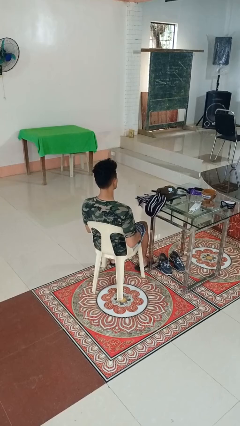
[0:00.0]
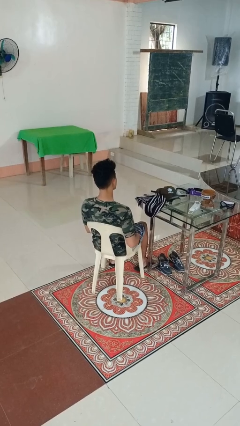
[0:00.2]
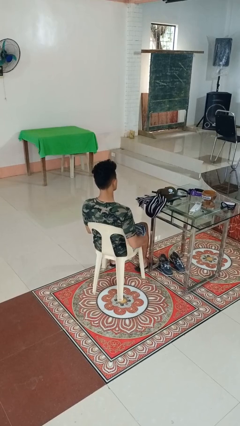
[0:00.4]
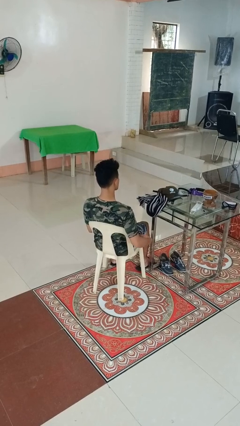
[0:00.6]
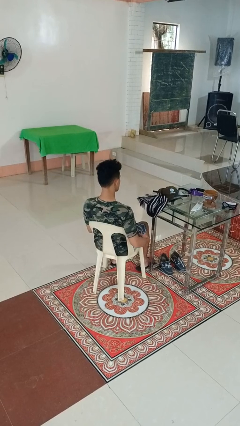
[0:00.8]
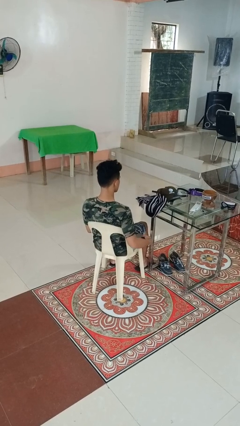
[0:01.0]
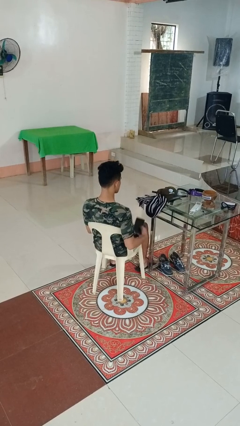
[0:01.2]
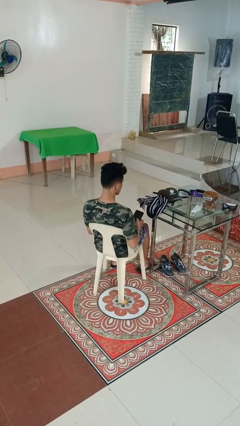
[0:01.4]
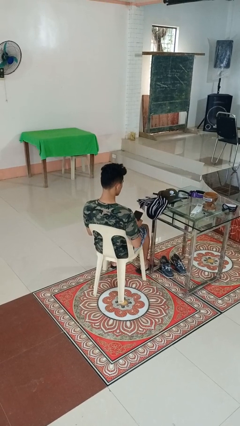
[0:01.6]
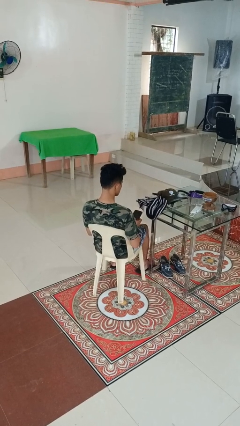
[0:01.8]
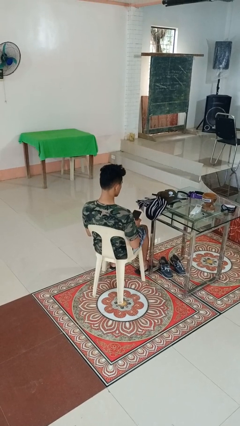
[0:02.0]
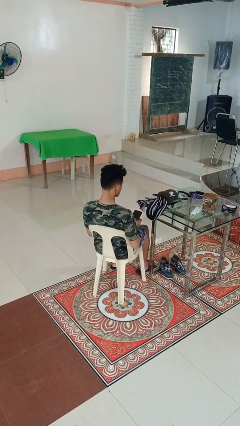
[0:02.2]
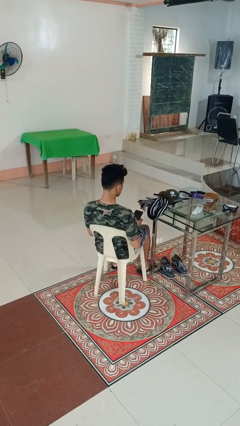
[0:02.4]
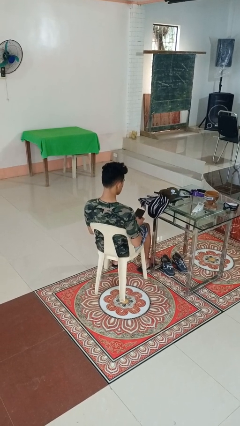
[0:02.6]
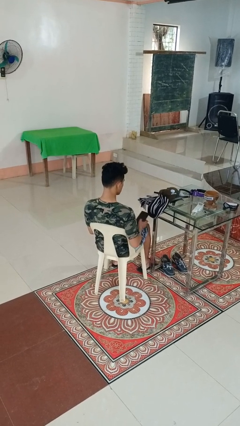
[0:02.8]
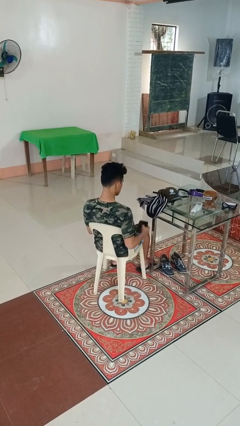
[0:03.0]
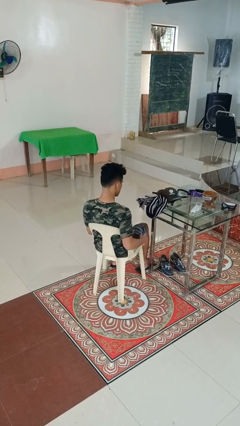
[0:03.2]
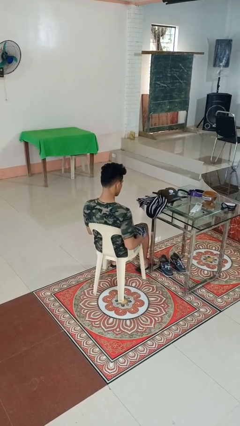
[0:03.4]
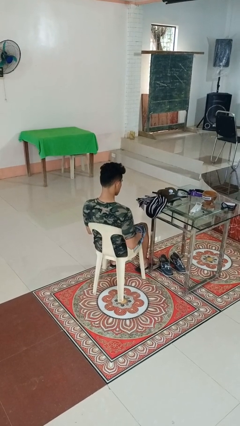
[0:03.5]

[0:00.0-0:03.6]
person takes phone from pocket

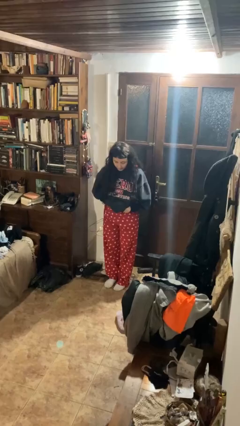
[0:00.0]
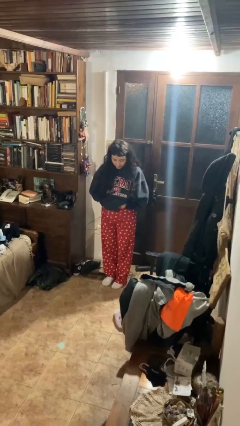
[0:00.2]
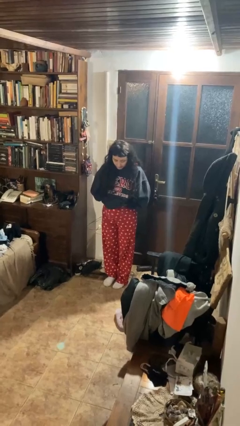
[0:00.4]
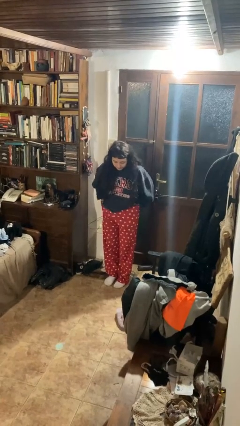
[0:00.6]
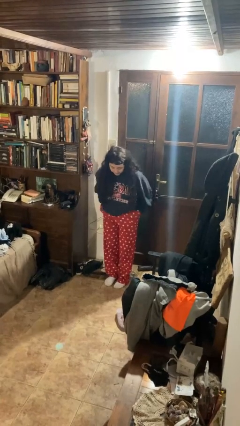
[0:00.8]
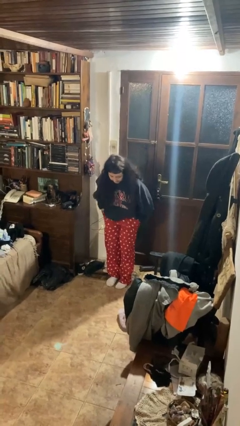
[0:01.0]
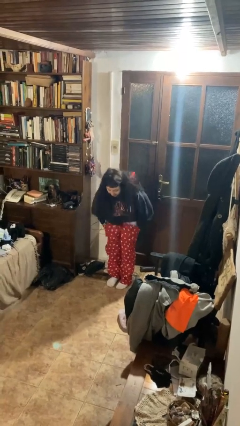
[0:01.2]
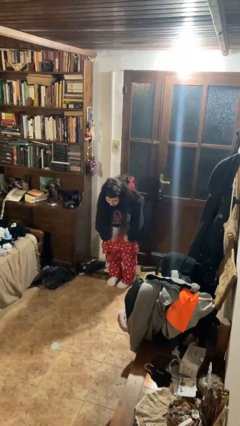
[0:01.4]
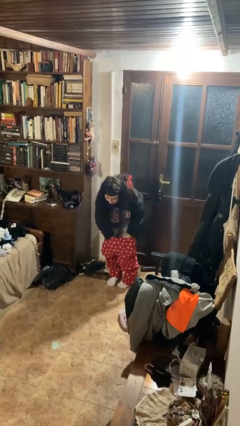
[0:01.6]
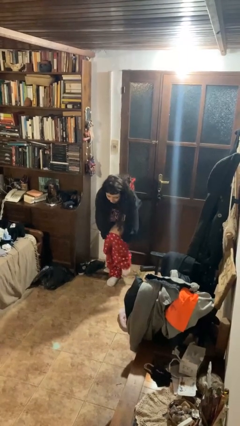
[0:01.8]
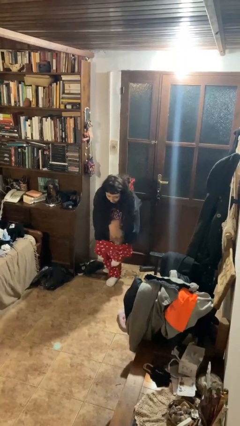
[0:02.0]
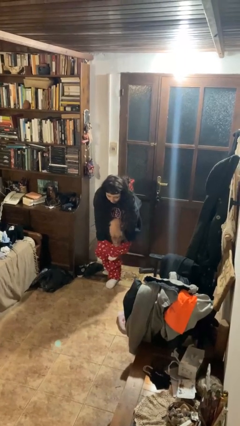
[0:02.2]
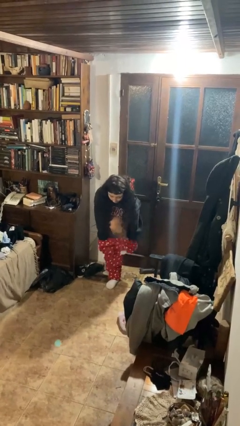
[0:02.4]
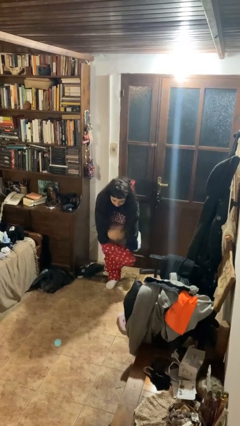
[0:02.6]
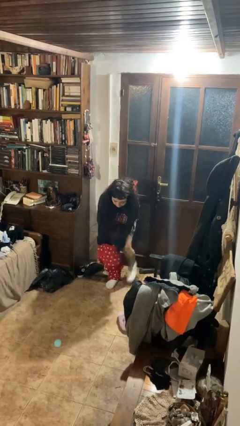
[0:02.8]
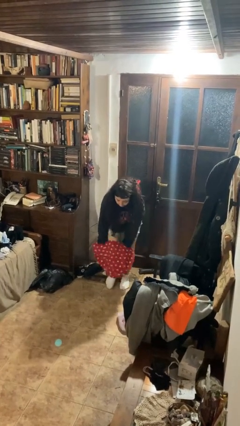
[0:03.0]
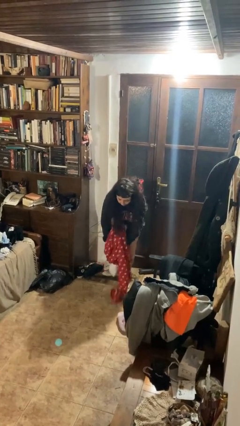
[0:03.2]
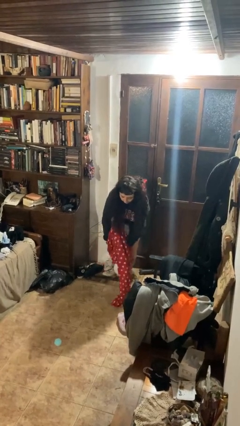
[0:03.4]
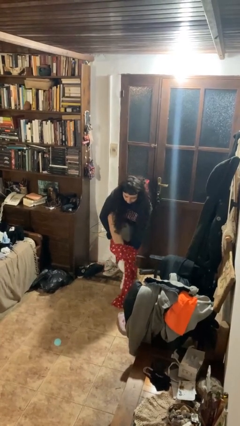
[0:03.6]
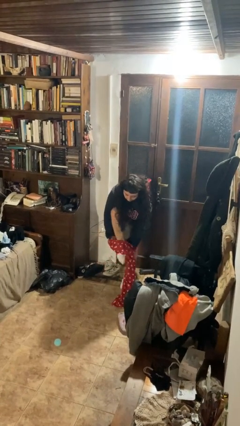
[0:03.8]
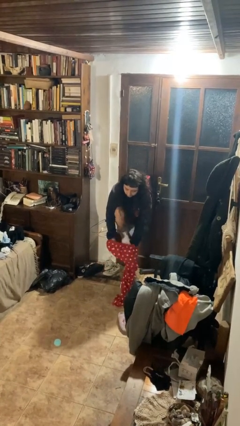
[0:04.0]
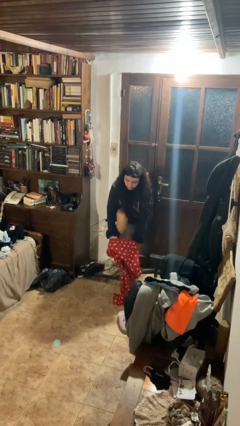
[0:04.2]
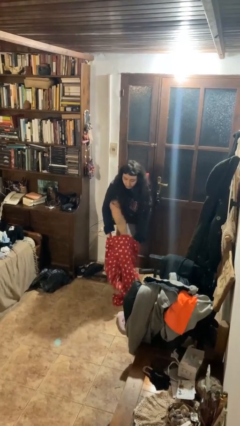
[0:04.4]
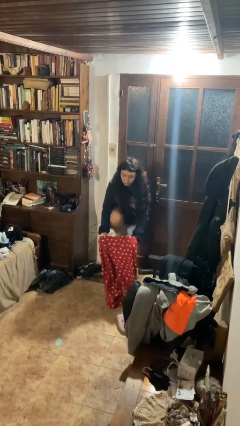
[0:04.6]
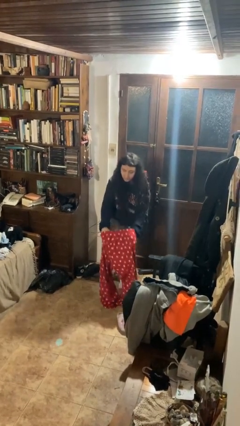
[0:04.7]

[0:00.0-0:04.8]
person takes off pants

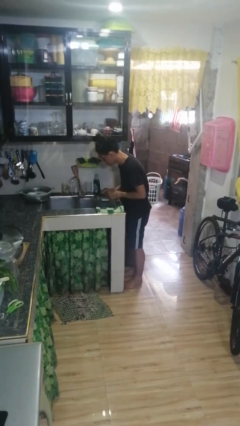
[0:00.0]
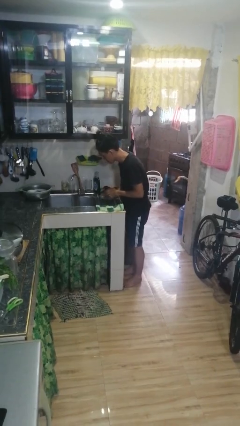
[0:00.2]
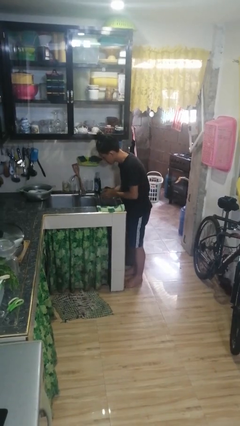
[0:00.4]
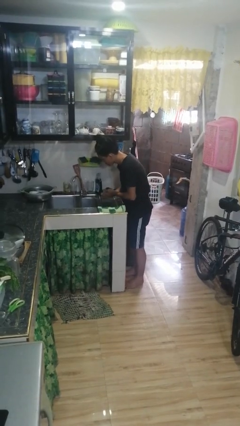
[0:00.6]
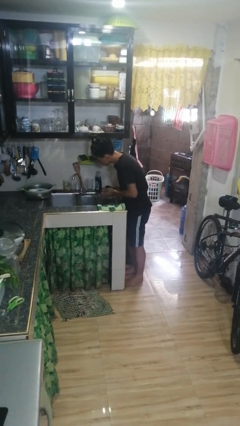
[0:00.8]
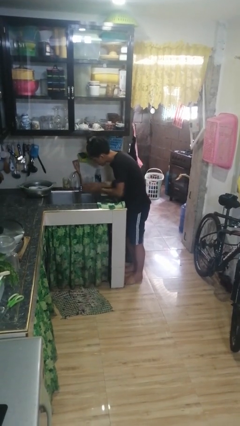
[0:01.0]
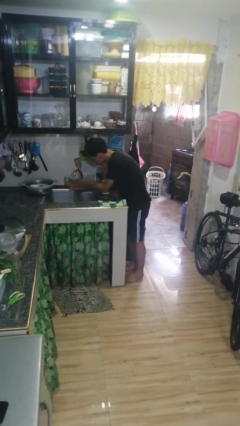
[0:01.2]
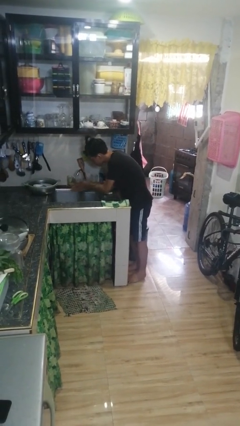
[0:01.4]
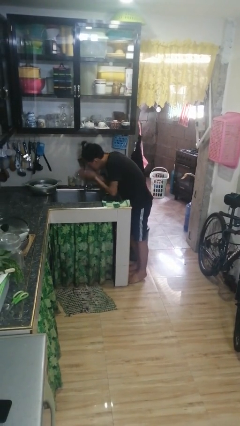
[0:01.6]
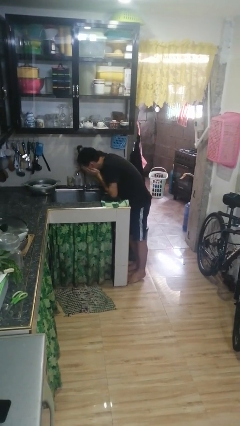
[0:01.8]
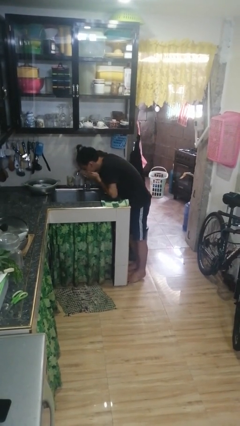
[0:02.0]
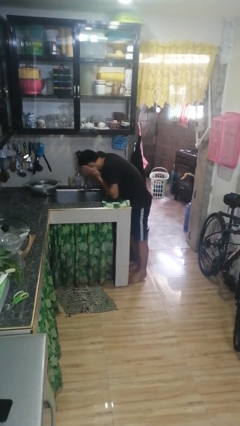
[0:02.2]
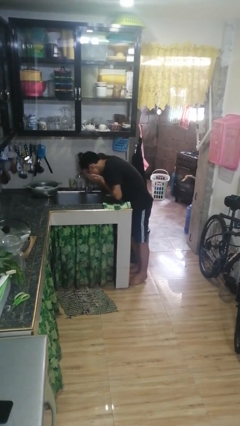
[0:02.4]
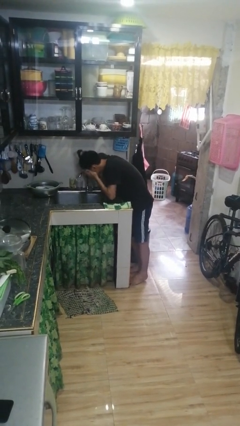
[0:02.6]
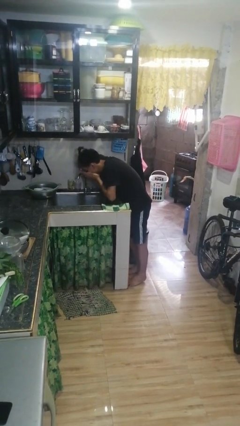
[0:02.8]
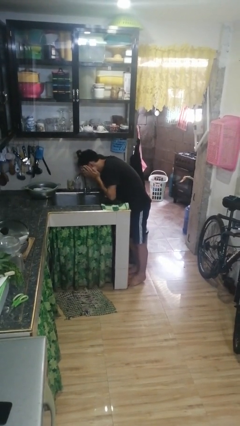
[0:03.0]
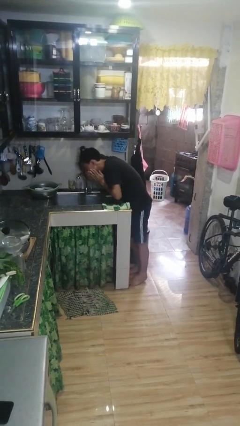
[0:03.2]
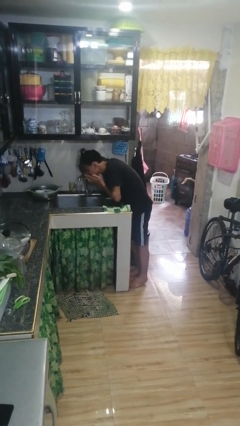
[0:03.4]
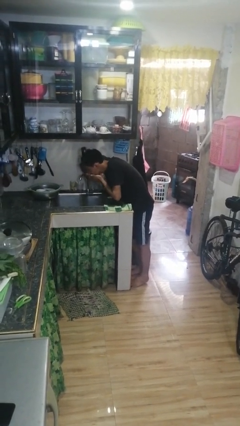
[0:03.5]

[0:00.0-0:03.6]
person washes face

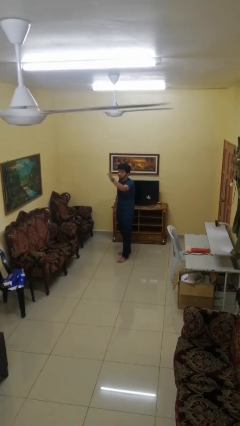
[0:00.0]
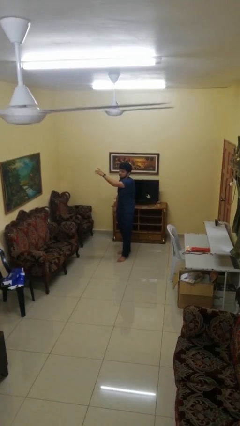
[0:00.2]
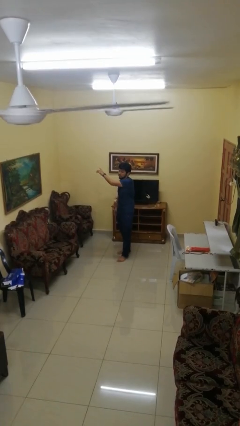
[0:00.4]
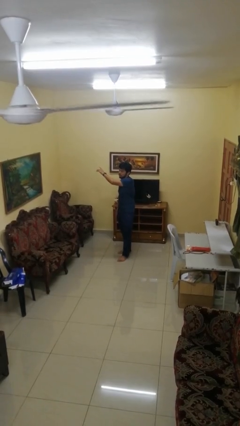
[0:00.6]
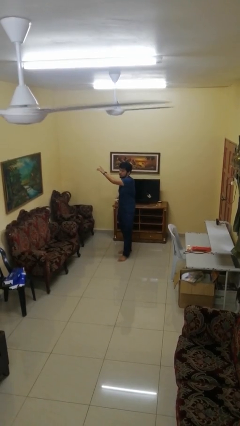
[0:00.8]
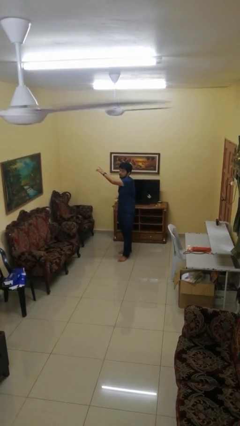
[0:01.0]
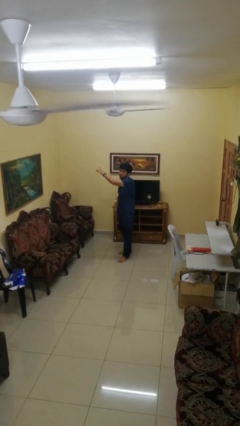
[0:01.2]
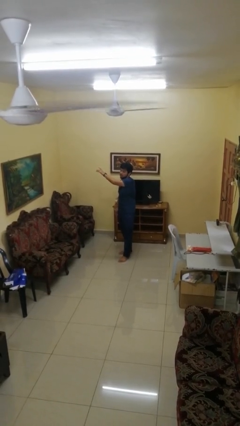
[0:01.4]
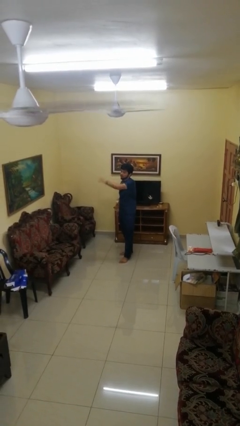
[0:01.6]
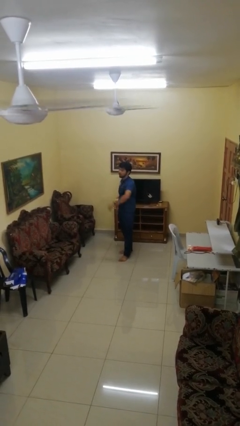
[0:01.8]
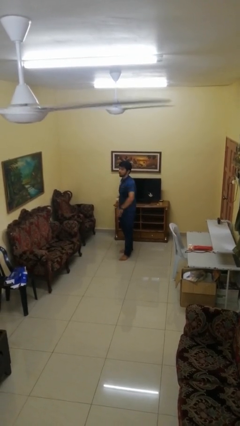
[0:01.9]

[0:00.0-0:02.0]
person gestures swipe right

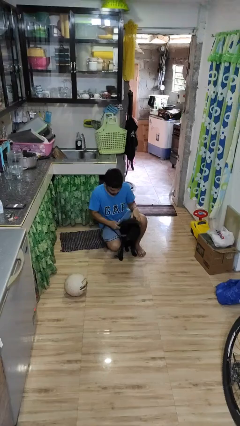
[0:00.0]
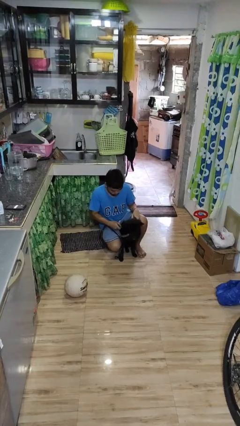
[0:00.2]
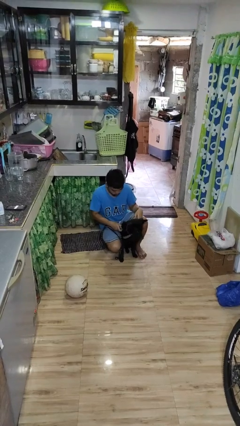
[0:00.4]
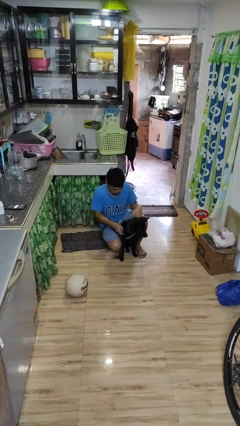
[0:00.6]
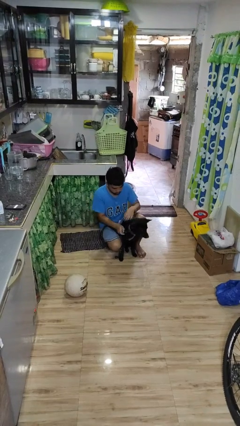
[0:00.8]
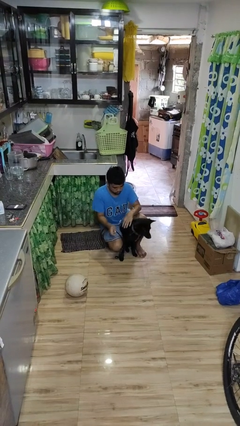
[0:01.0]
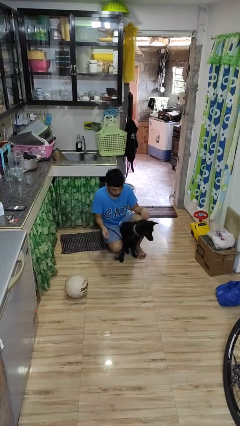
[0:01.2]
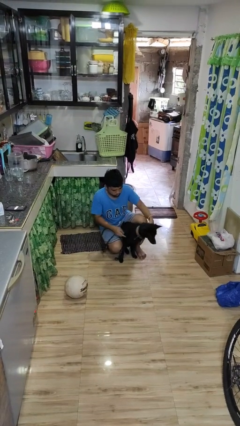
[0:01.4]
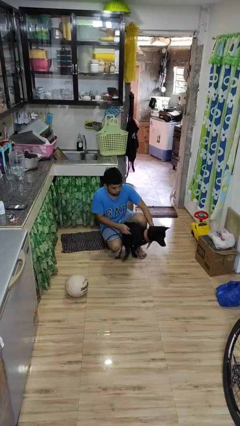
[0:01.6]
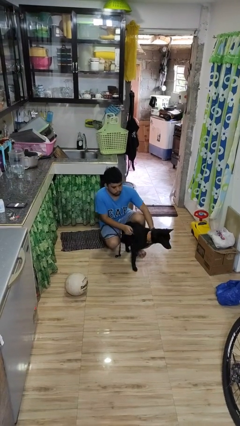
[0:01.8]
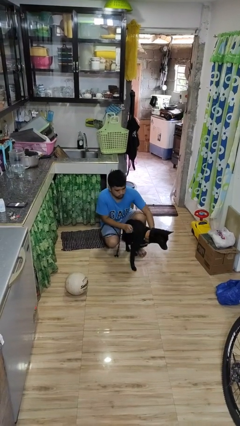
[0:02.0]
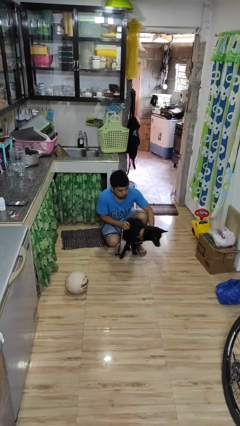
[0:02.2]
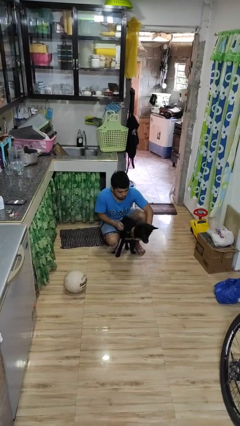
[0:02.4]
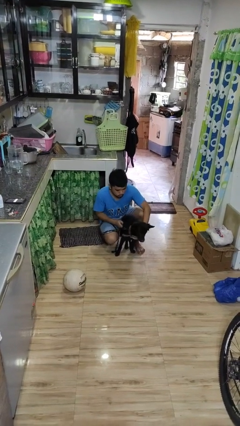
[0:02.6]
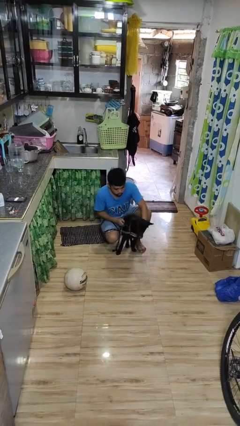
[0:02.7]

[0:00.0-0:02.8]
person unattaches leash from dog

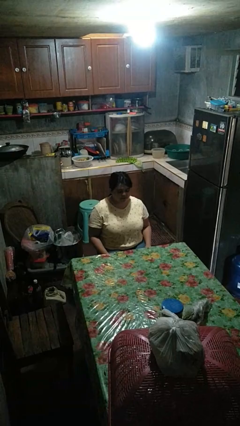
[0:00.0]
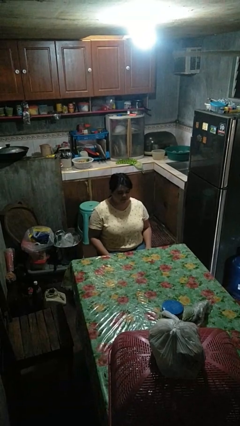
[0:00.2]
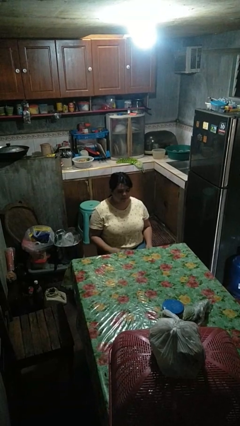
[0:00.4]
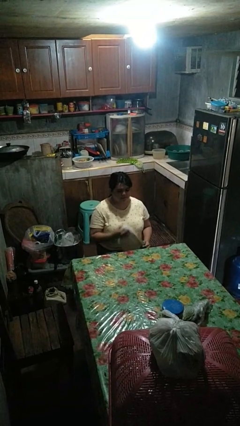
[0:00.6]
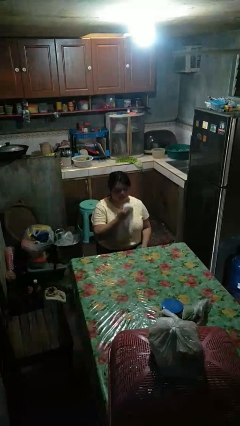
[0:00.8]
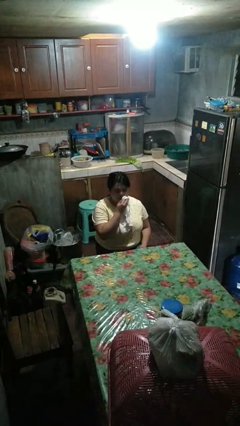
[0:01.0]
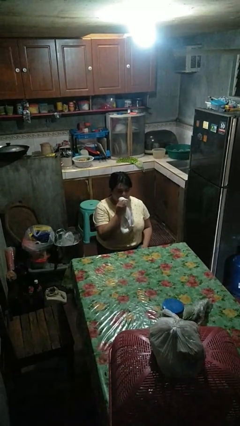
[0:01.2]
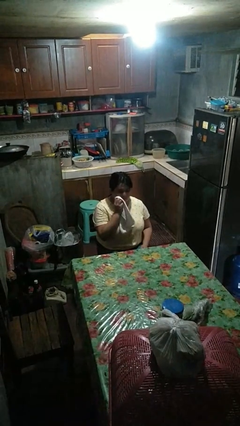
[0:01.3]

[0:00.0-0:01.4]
person wipes mouth with napkin
